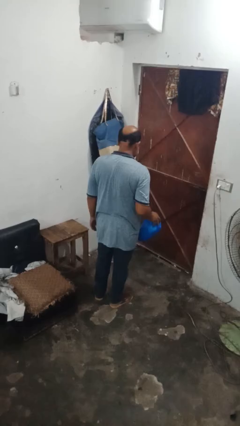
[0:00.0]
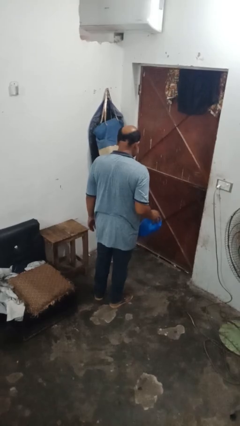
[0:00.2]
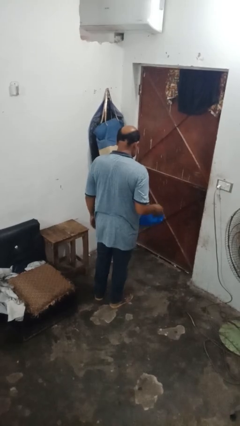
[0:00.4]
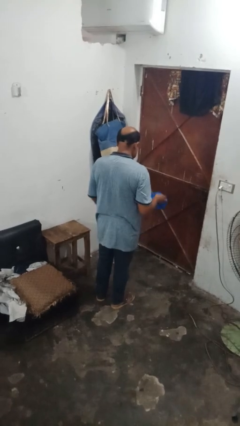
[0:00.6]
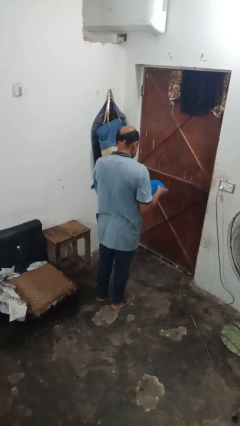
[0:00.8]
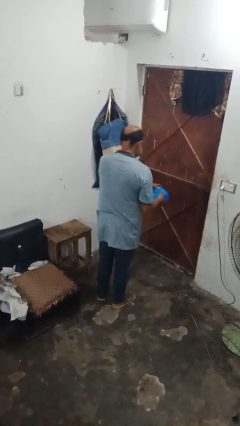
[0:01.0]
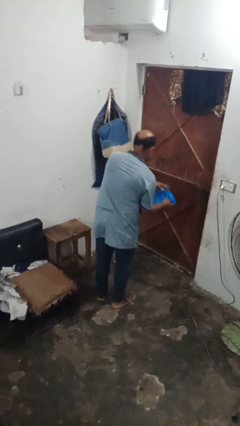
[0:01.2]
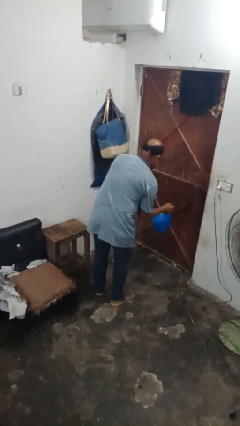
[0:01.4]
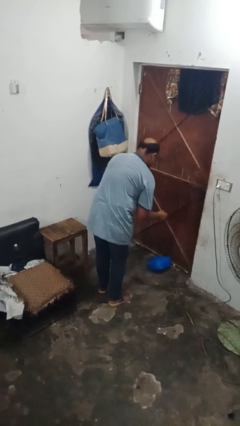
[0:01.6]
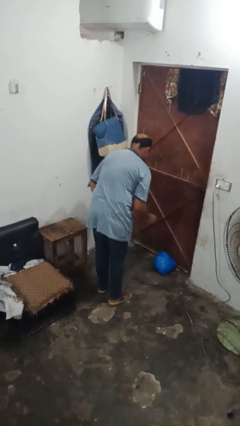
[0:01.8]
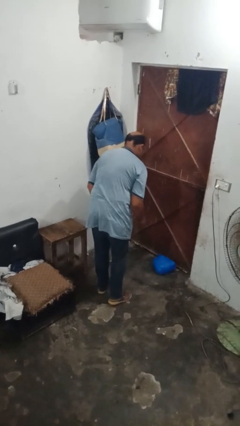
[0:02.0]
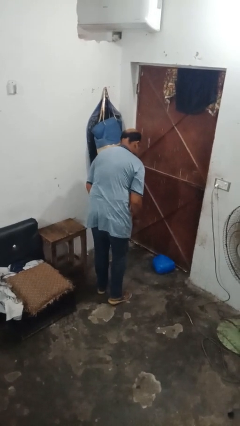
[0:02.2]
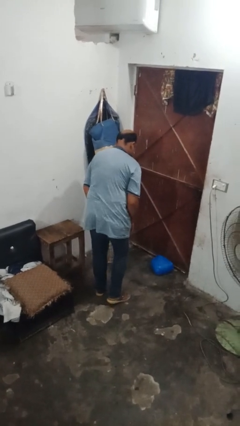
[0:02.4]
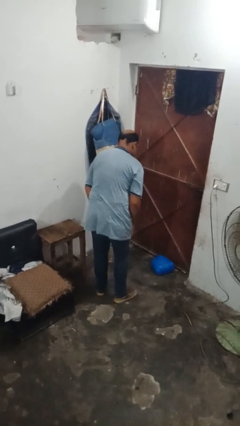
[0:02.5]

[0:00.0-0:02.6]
person drops object

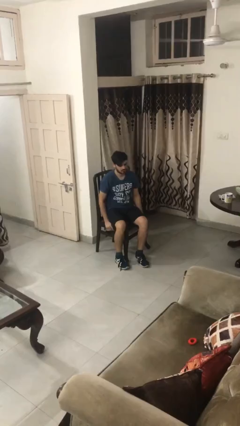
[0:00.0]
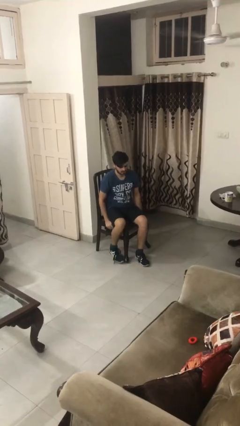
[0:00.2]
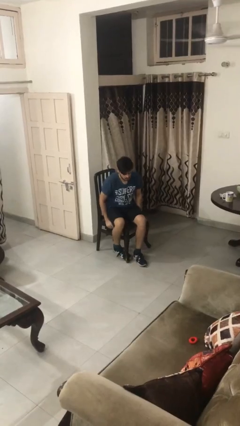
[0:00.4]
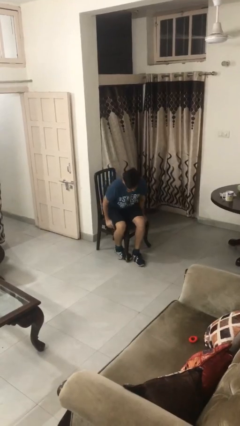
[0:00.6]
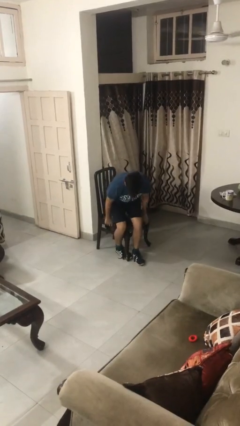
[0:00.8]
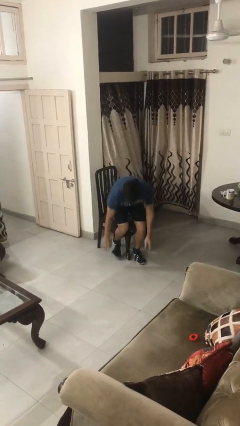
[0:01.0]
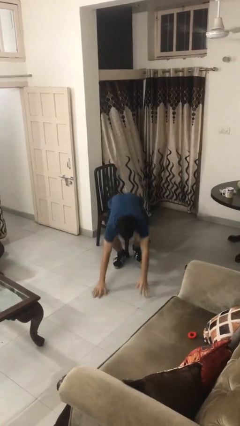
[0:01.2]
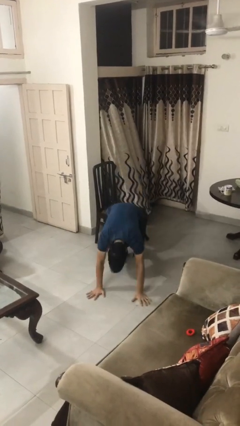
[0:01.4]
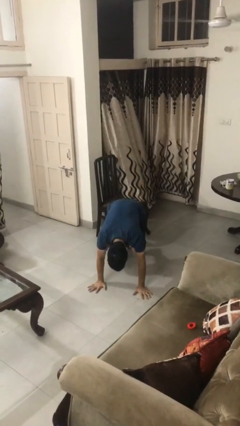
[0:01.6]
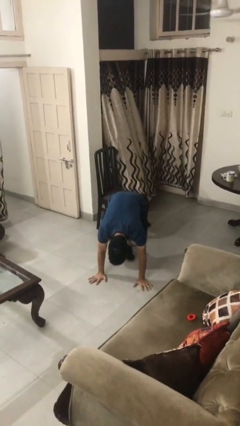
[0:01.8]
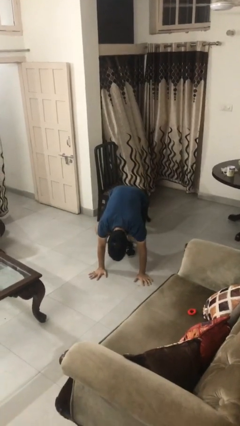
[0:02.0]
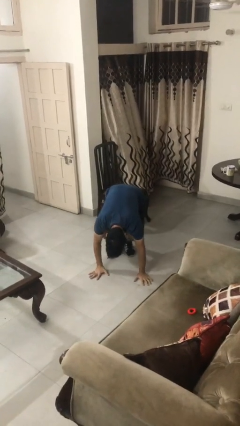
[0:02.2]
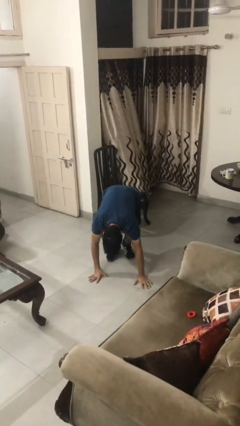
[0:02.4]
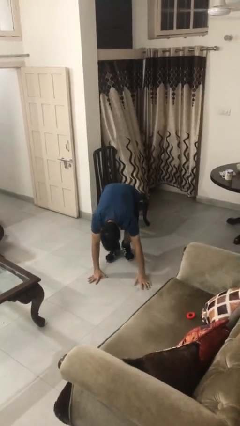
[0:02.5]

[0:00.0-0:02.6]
person falls from chair

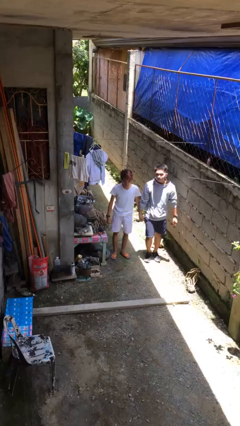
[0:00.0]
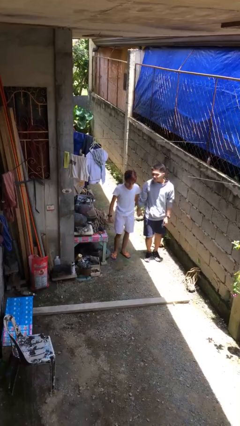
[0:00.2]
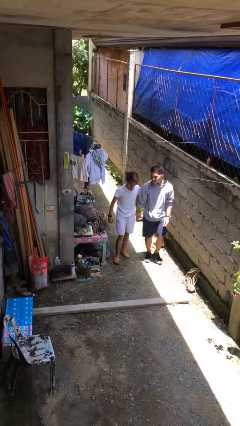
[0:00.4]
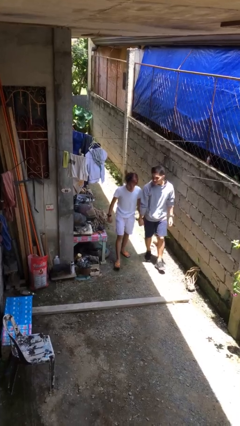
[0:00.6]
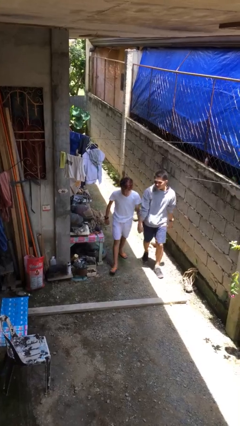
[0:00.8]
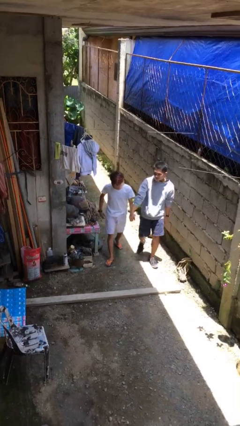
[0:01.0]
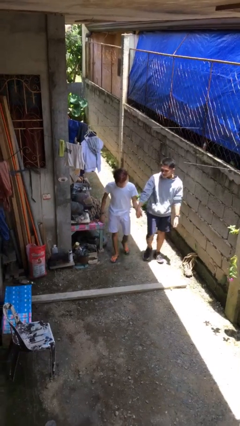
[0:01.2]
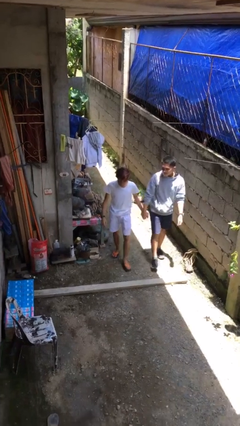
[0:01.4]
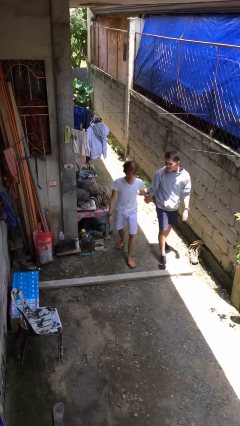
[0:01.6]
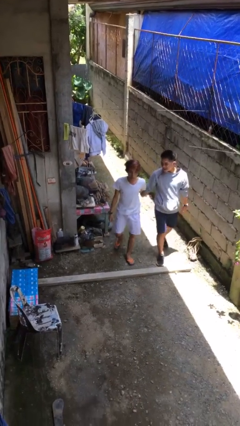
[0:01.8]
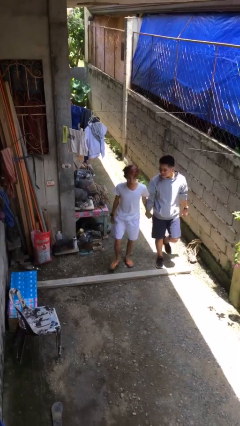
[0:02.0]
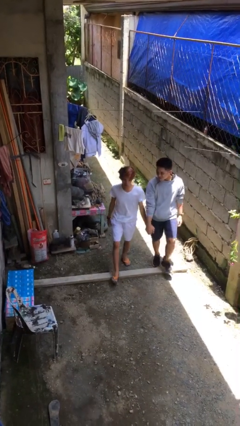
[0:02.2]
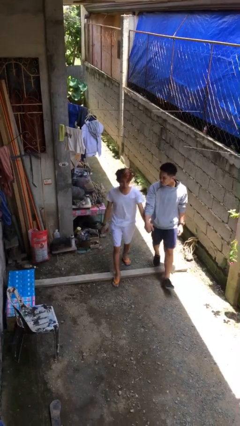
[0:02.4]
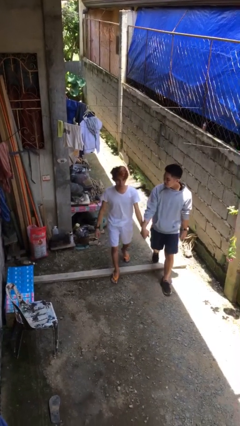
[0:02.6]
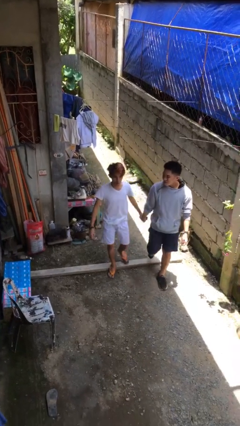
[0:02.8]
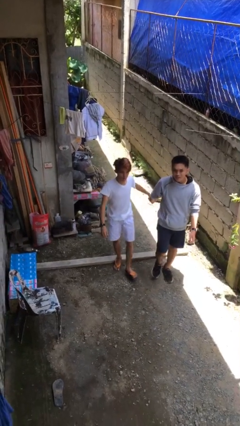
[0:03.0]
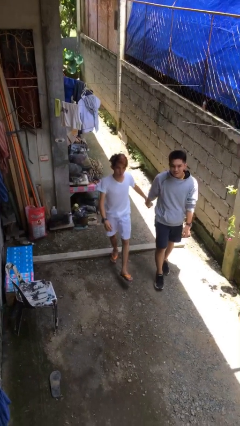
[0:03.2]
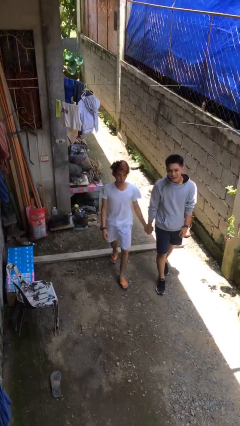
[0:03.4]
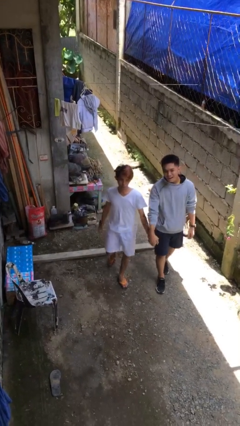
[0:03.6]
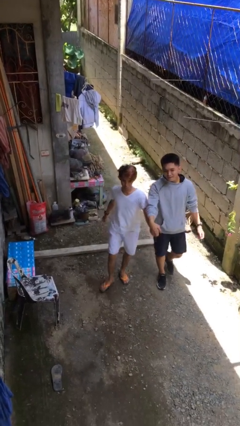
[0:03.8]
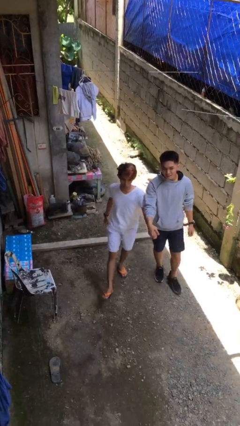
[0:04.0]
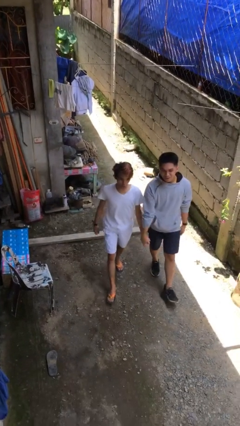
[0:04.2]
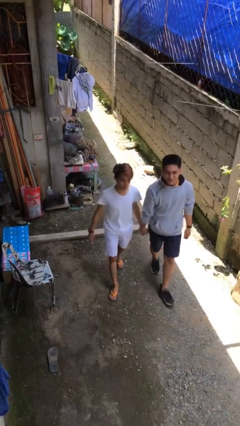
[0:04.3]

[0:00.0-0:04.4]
person holds hand

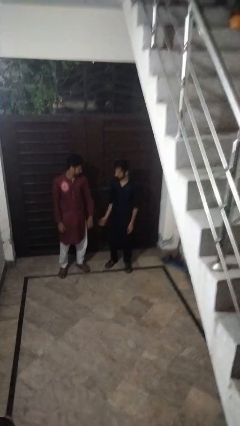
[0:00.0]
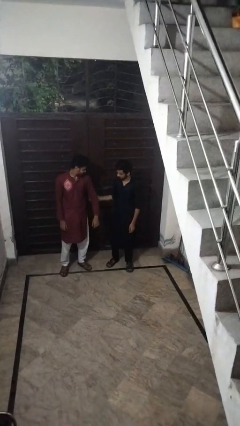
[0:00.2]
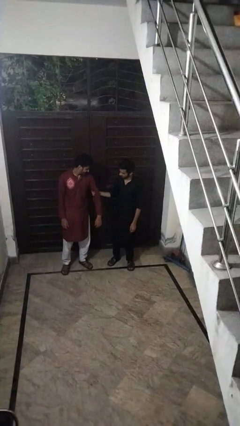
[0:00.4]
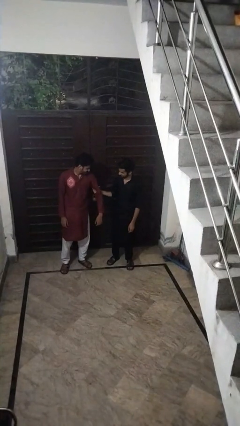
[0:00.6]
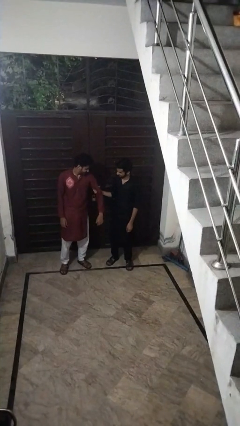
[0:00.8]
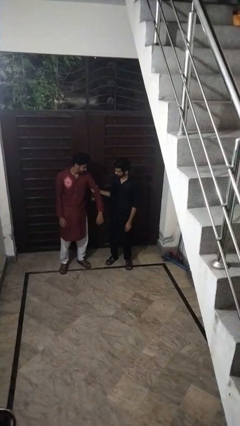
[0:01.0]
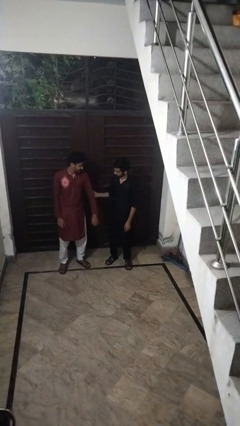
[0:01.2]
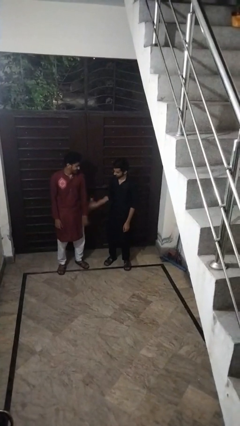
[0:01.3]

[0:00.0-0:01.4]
person grabs person by bicep

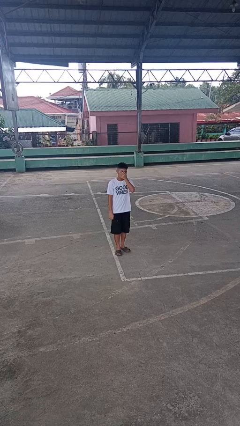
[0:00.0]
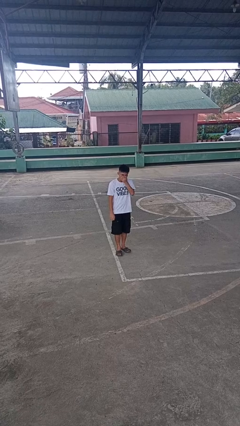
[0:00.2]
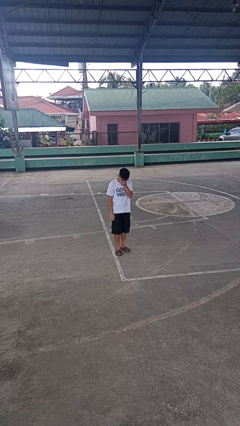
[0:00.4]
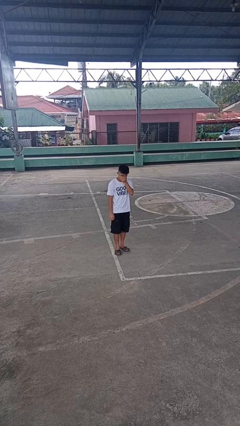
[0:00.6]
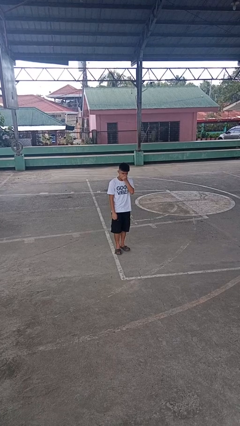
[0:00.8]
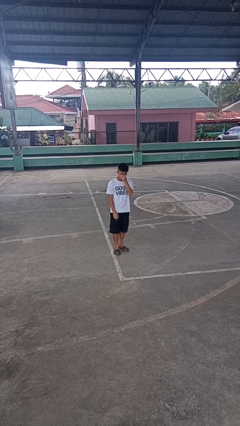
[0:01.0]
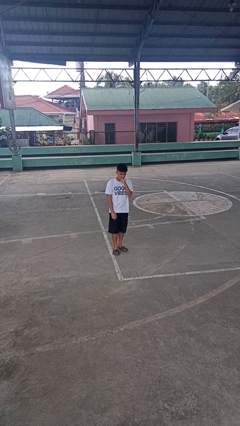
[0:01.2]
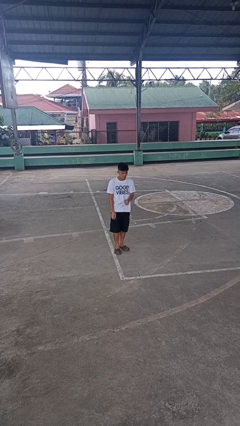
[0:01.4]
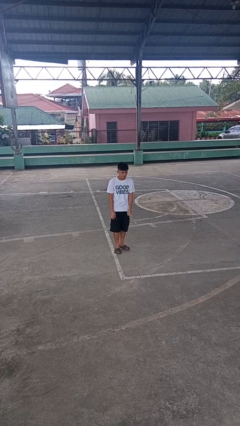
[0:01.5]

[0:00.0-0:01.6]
person sneezes into hand

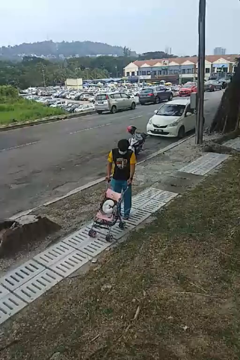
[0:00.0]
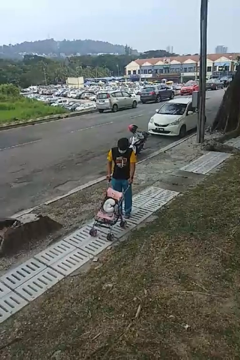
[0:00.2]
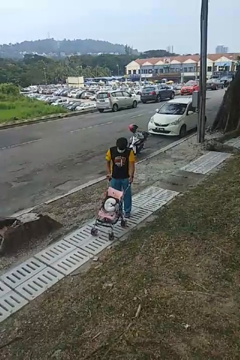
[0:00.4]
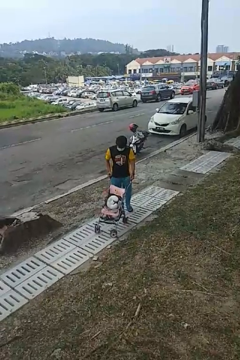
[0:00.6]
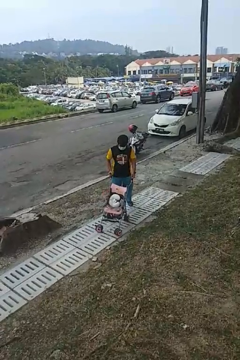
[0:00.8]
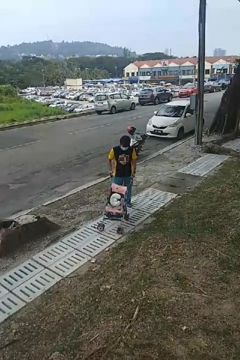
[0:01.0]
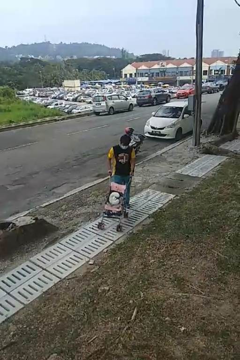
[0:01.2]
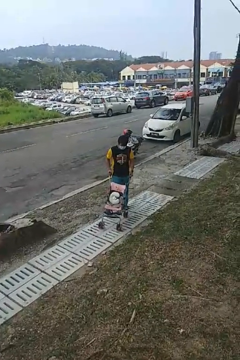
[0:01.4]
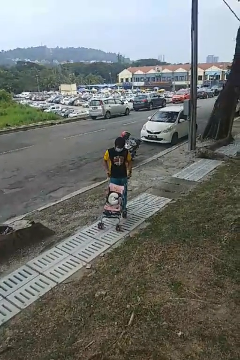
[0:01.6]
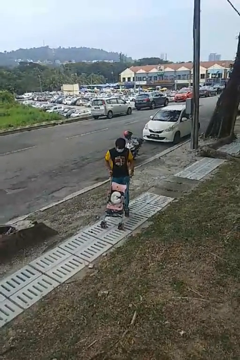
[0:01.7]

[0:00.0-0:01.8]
person pulls wheeled cart

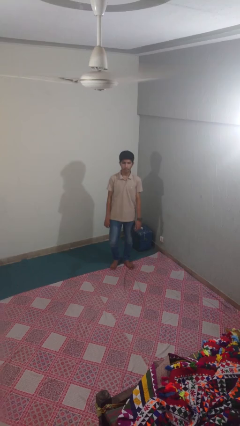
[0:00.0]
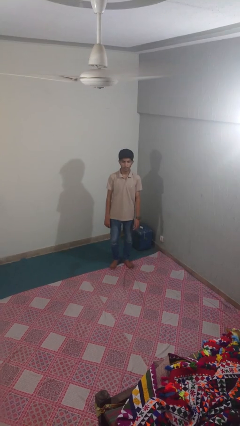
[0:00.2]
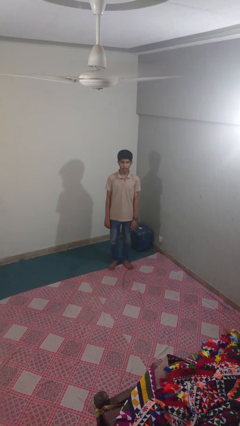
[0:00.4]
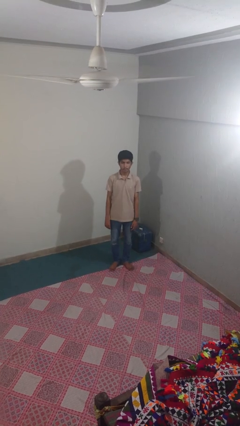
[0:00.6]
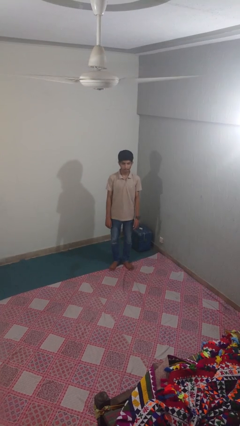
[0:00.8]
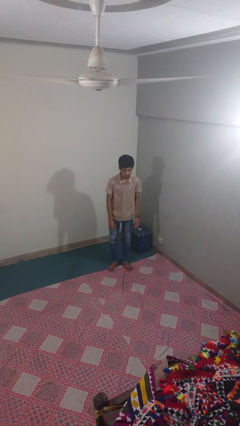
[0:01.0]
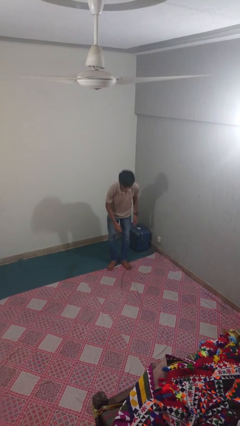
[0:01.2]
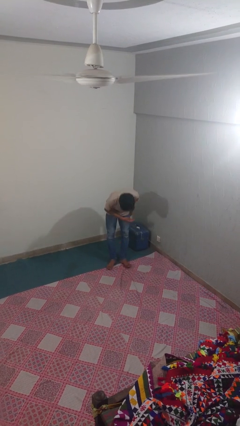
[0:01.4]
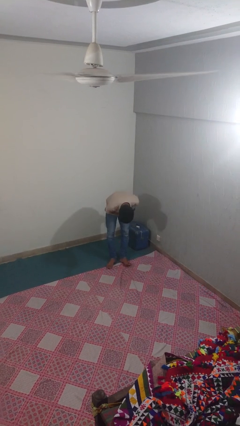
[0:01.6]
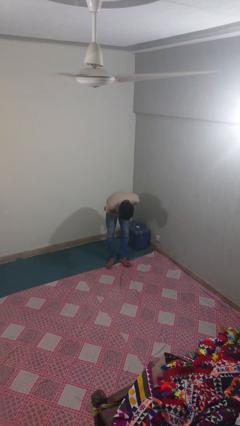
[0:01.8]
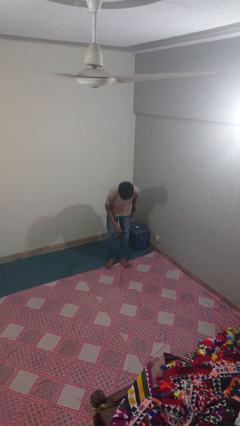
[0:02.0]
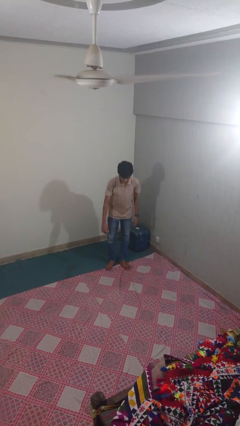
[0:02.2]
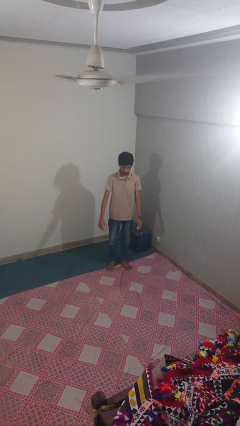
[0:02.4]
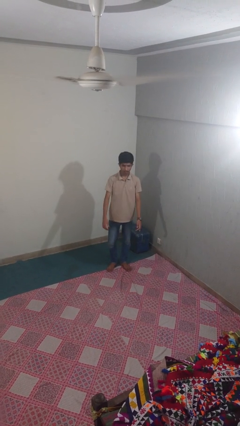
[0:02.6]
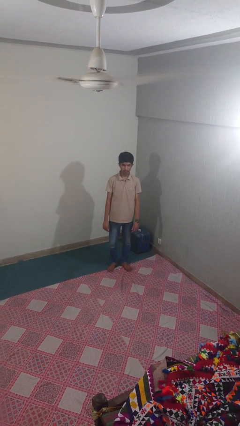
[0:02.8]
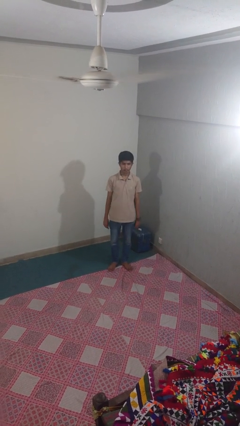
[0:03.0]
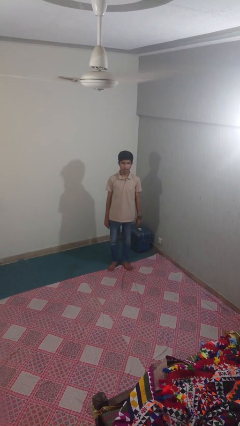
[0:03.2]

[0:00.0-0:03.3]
person bows
